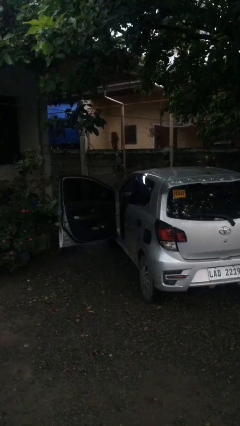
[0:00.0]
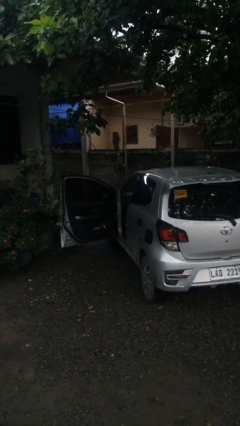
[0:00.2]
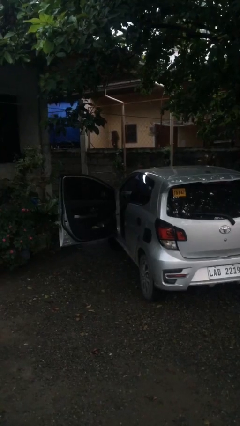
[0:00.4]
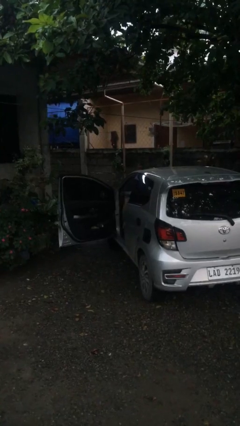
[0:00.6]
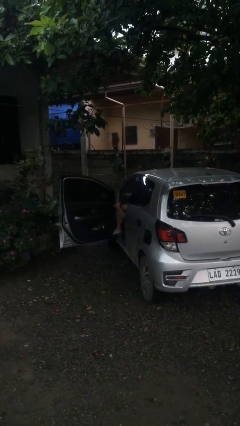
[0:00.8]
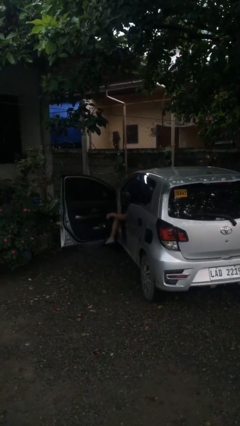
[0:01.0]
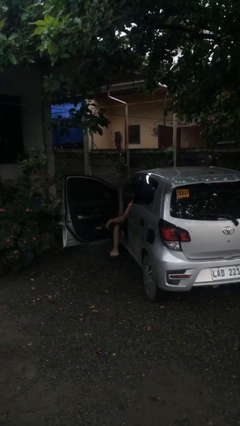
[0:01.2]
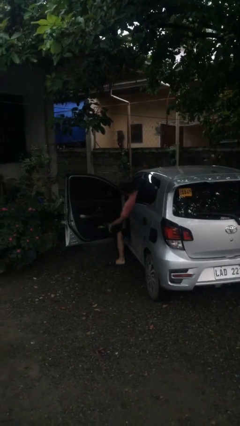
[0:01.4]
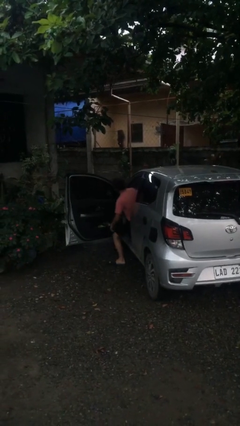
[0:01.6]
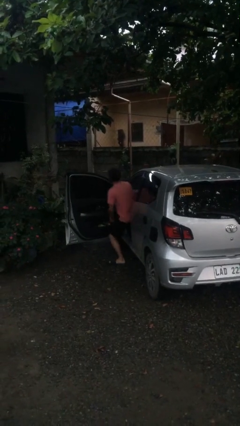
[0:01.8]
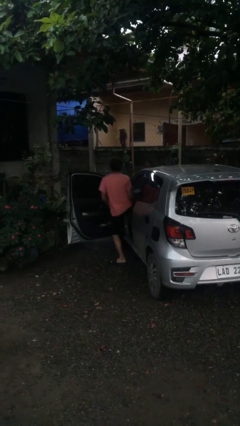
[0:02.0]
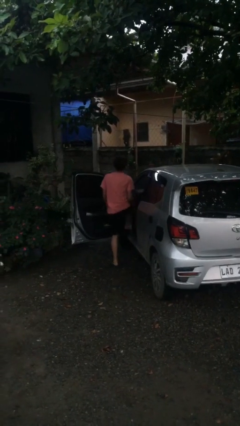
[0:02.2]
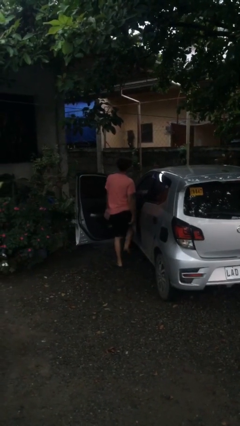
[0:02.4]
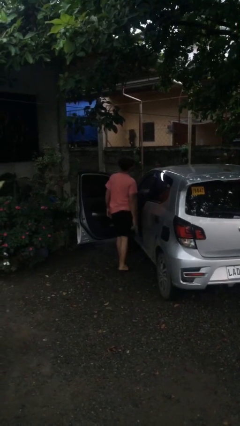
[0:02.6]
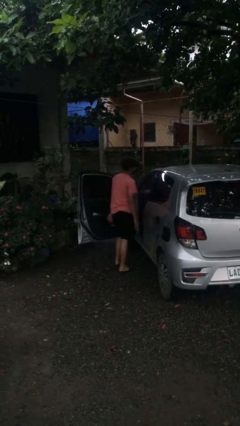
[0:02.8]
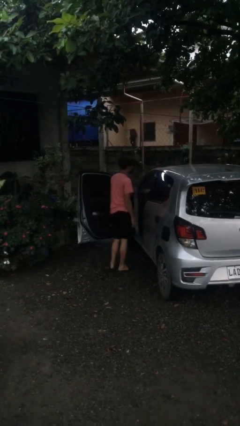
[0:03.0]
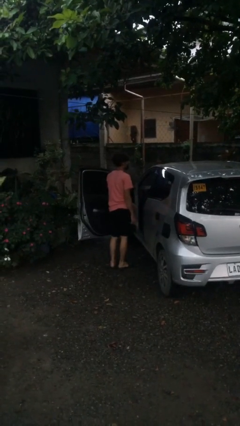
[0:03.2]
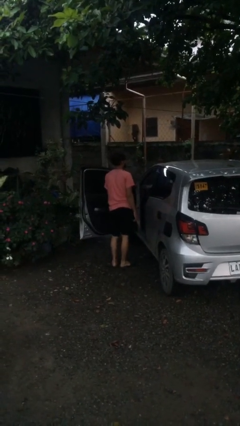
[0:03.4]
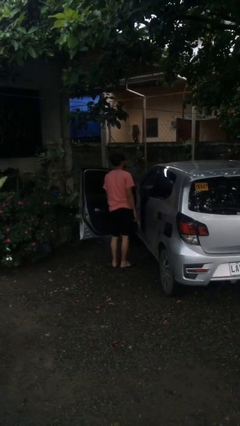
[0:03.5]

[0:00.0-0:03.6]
person exits car

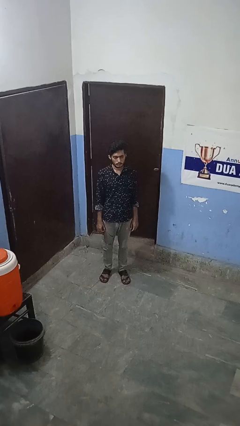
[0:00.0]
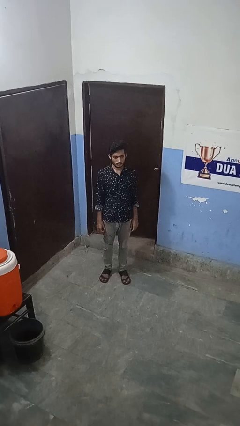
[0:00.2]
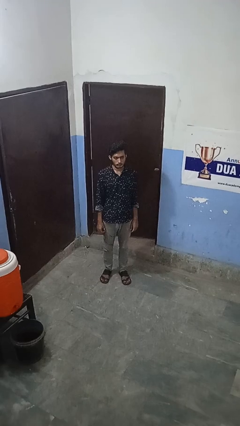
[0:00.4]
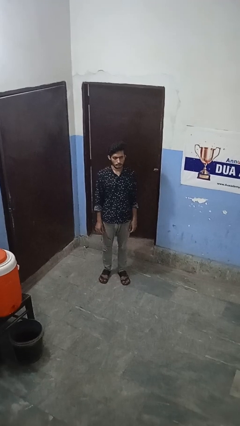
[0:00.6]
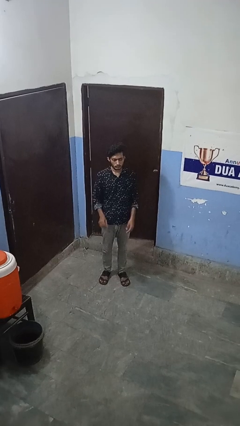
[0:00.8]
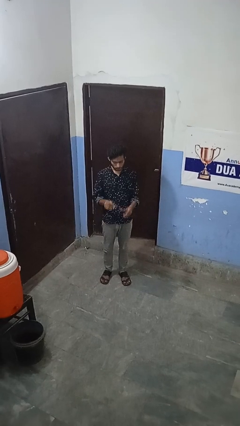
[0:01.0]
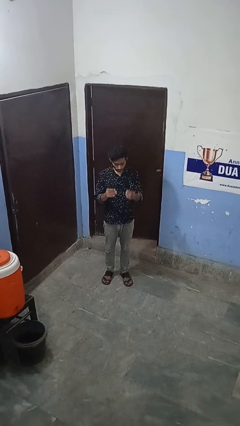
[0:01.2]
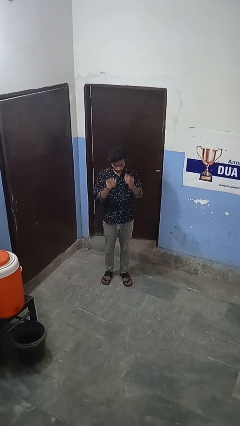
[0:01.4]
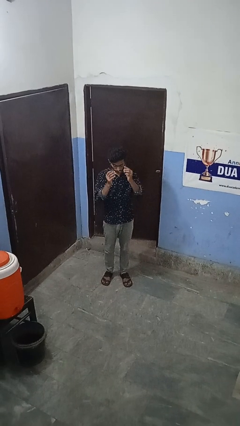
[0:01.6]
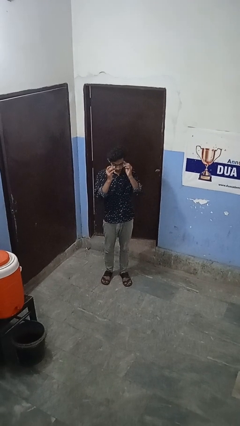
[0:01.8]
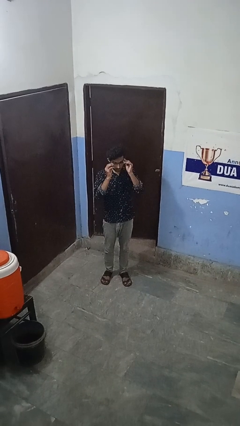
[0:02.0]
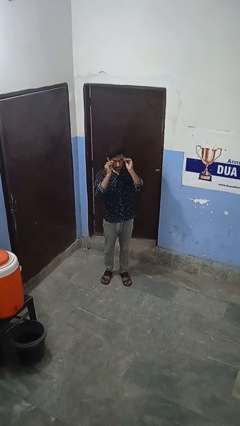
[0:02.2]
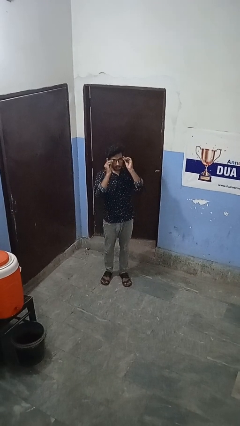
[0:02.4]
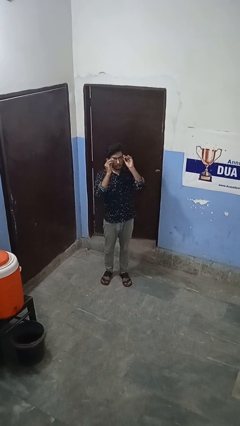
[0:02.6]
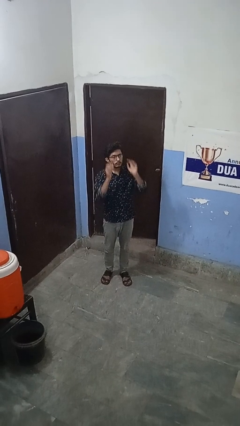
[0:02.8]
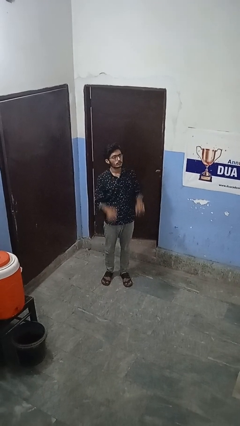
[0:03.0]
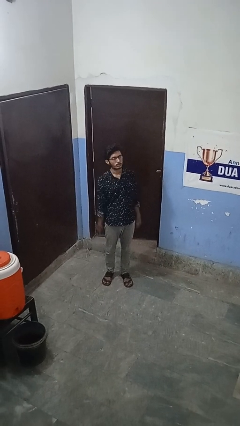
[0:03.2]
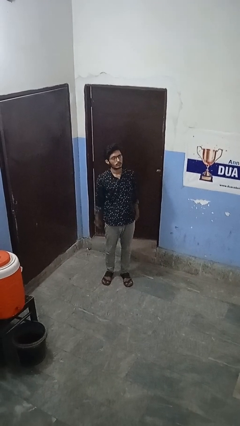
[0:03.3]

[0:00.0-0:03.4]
person puts on glasses

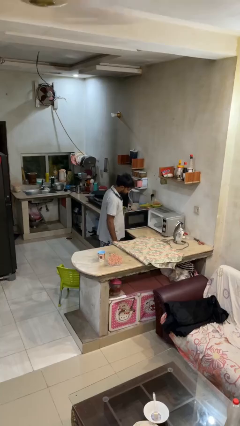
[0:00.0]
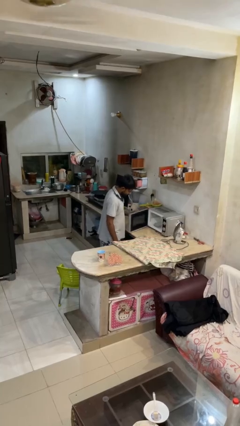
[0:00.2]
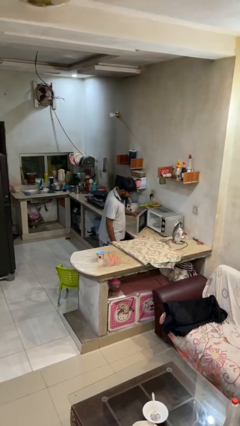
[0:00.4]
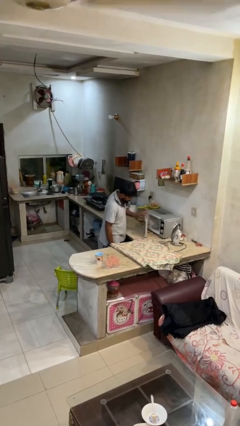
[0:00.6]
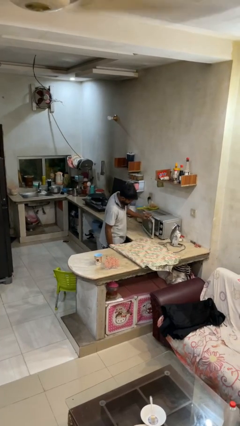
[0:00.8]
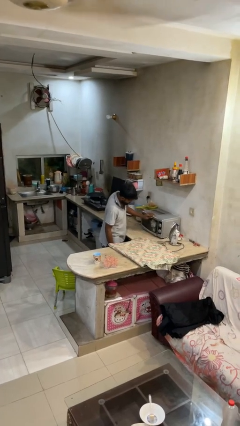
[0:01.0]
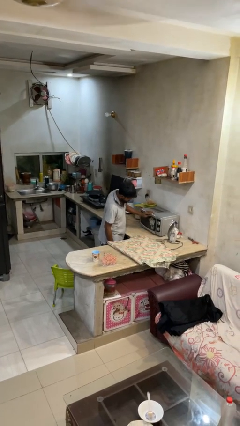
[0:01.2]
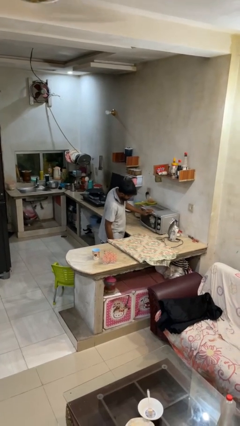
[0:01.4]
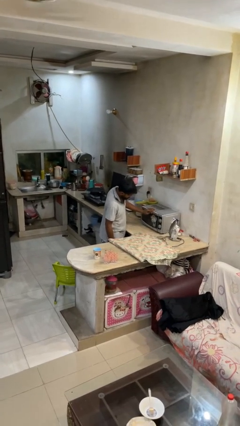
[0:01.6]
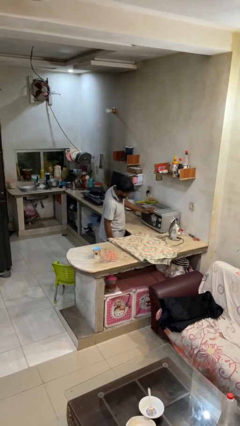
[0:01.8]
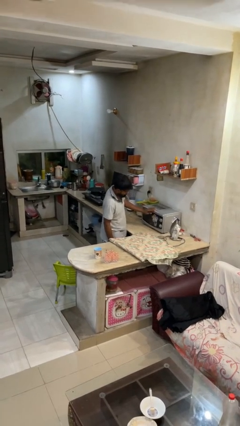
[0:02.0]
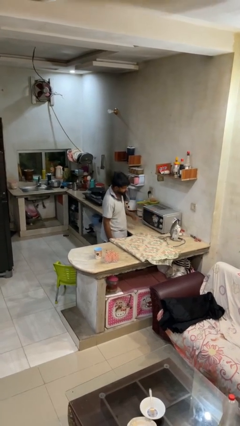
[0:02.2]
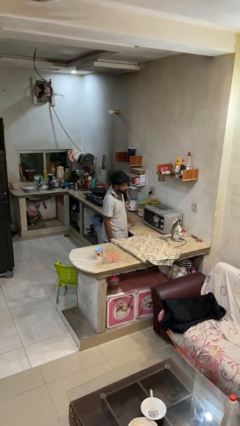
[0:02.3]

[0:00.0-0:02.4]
person closes microwave

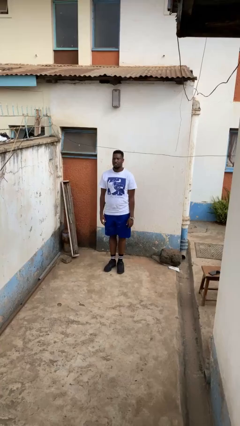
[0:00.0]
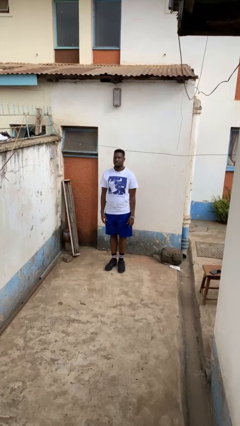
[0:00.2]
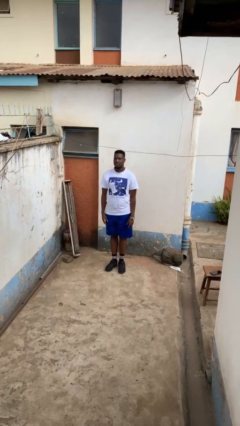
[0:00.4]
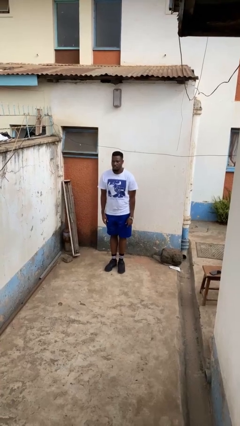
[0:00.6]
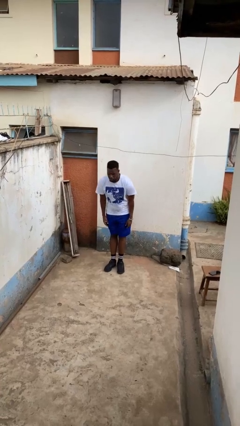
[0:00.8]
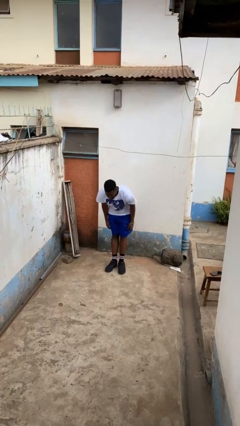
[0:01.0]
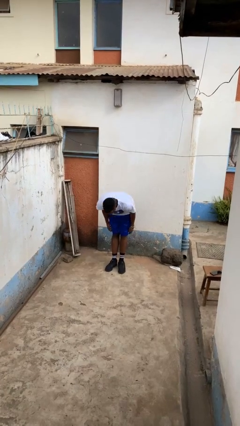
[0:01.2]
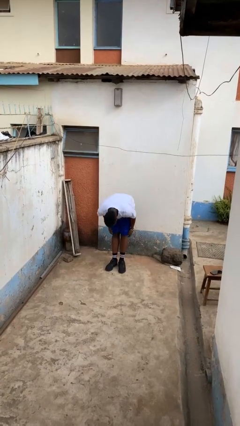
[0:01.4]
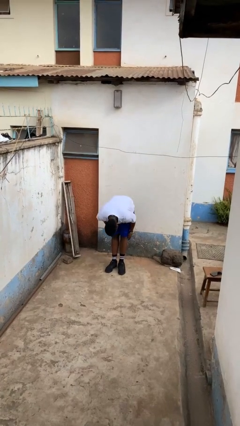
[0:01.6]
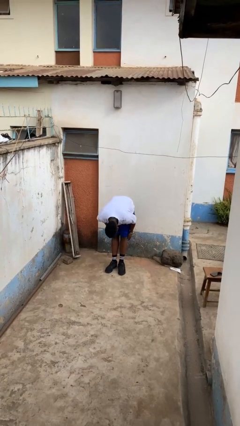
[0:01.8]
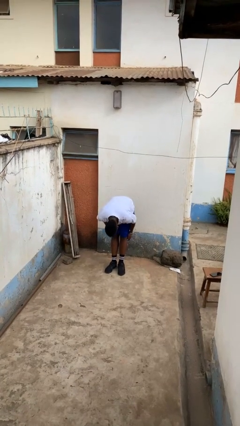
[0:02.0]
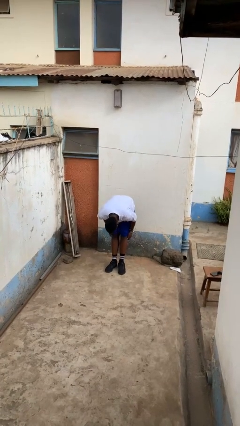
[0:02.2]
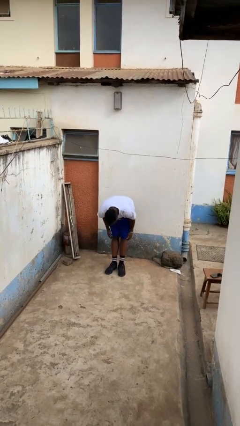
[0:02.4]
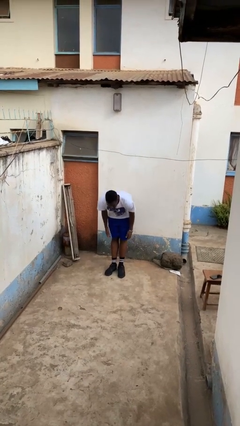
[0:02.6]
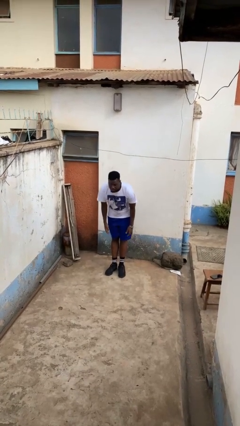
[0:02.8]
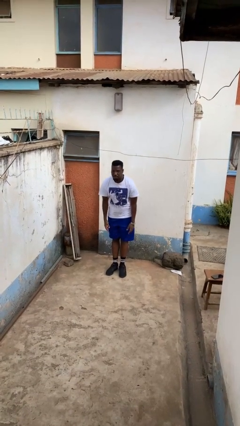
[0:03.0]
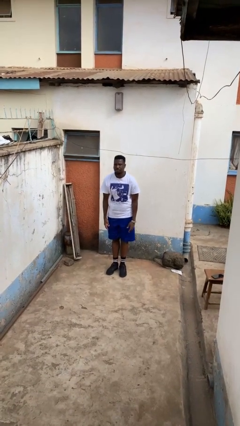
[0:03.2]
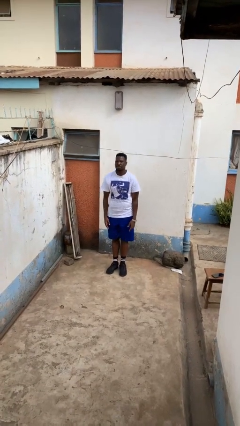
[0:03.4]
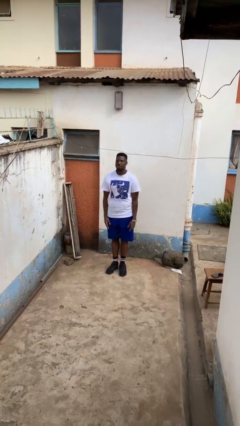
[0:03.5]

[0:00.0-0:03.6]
person bows

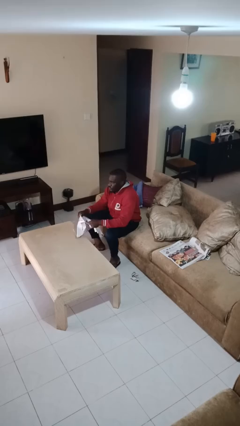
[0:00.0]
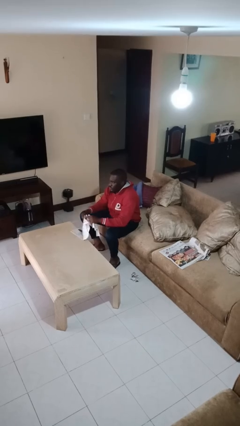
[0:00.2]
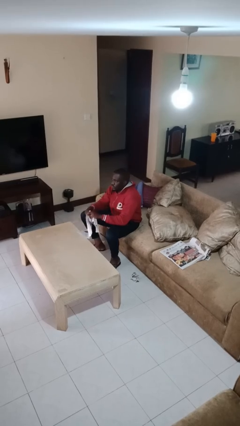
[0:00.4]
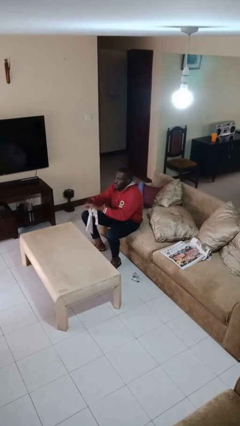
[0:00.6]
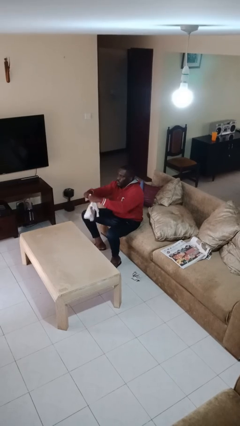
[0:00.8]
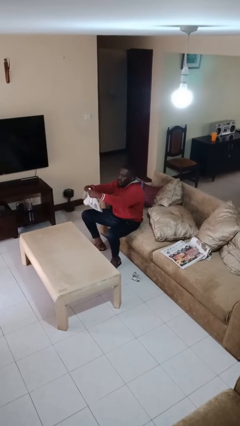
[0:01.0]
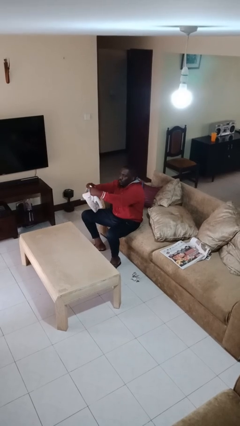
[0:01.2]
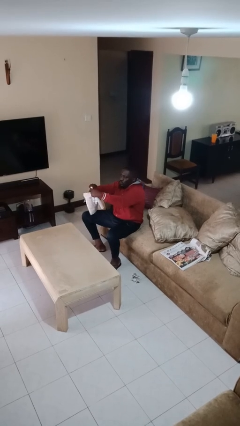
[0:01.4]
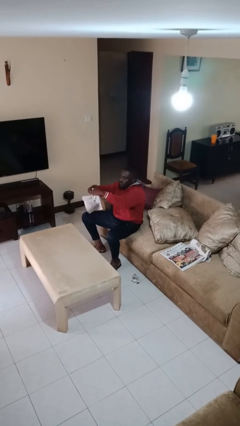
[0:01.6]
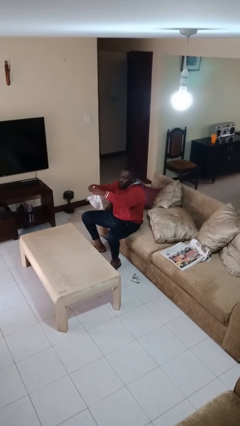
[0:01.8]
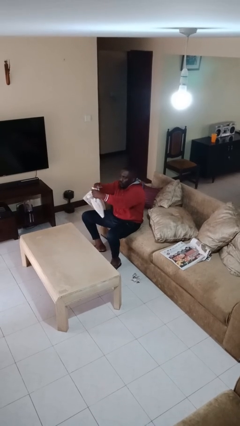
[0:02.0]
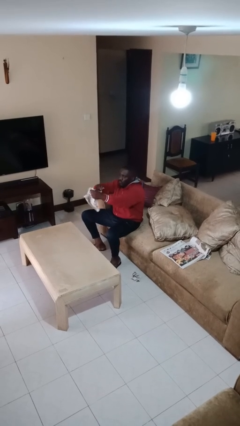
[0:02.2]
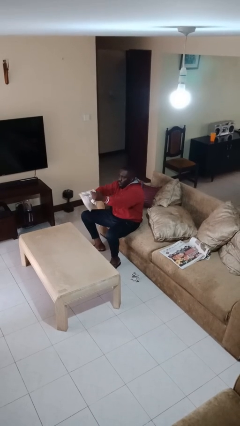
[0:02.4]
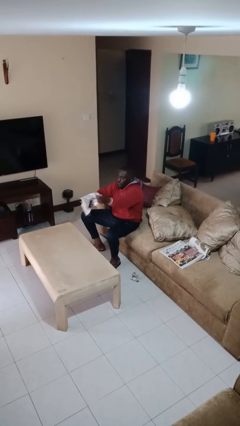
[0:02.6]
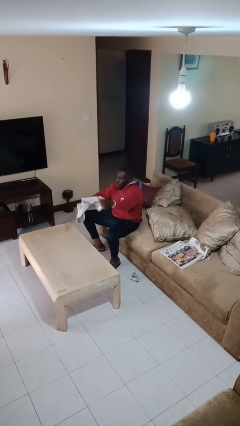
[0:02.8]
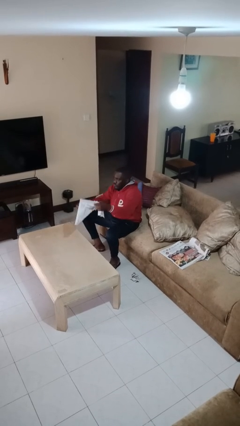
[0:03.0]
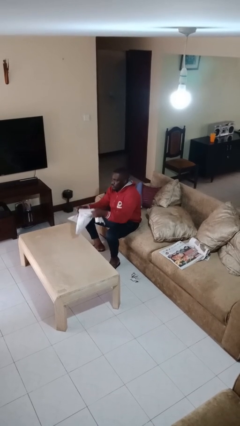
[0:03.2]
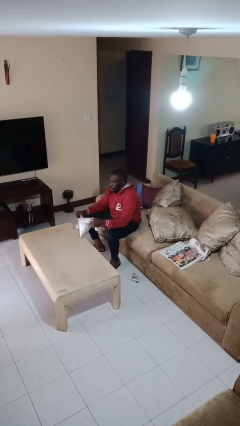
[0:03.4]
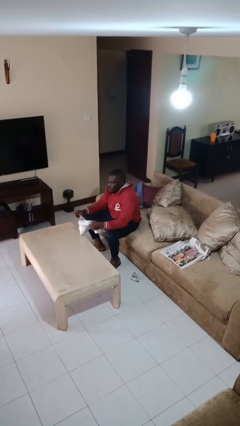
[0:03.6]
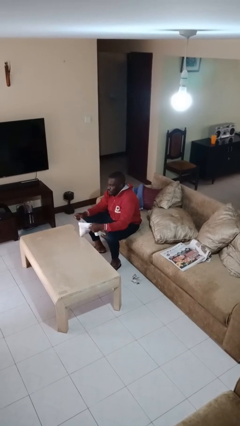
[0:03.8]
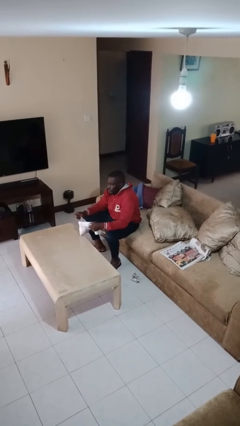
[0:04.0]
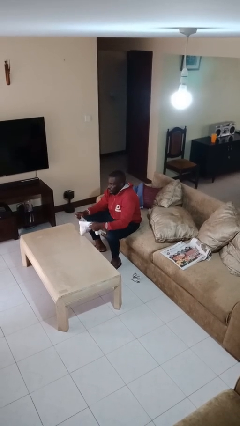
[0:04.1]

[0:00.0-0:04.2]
person tears paper

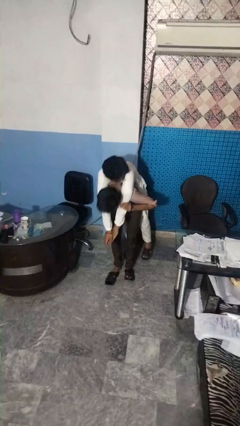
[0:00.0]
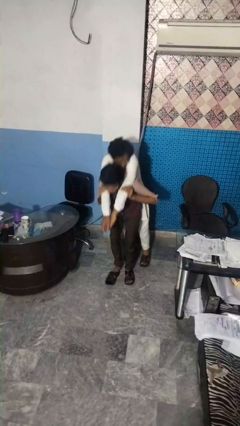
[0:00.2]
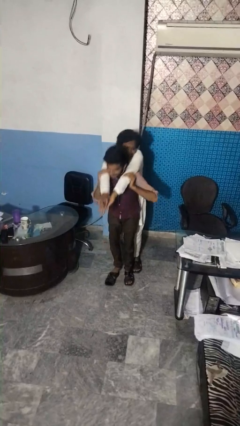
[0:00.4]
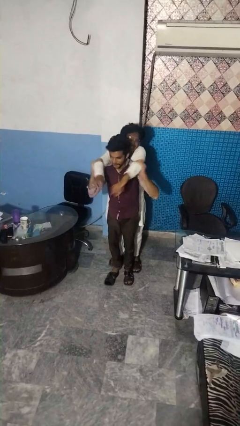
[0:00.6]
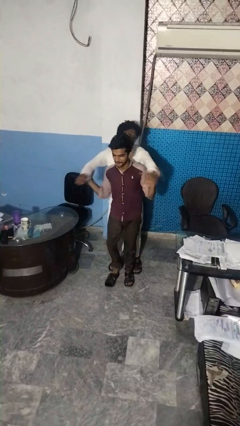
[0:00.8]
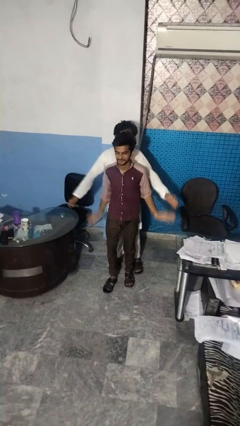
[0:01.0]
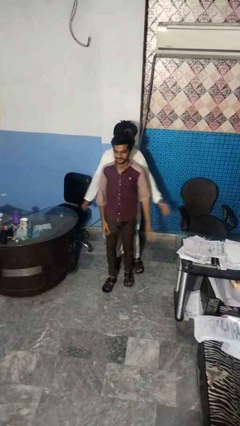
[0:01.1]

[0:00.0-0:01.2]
person puts down person
